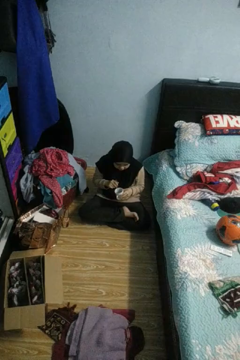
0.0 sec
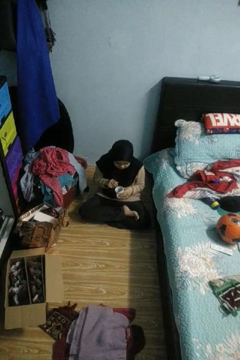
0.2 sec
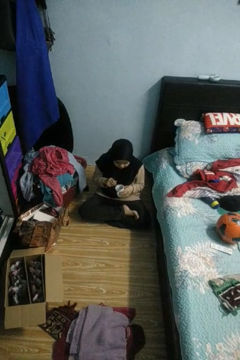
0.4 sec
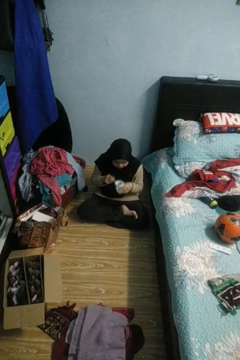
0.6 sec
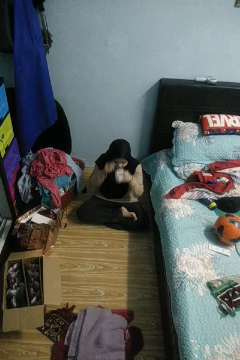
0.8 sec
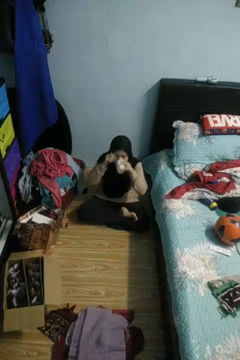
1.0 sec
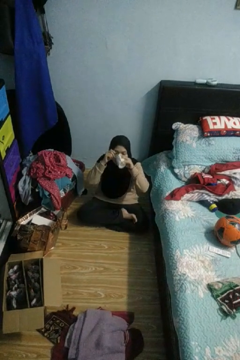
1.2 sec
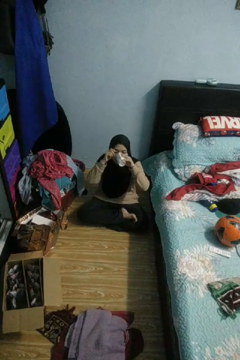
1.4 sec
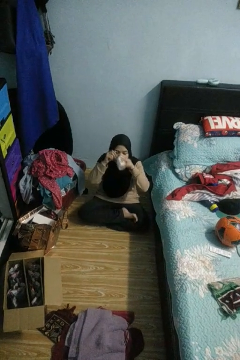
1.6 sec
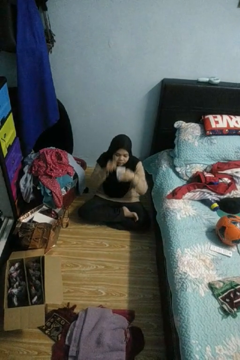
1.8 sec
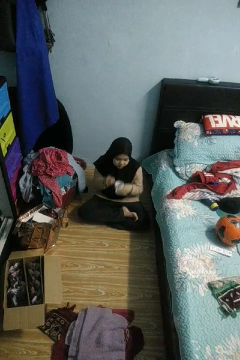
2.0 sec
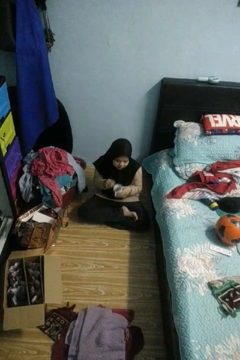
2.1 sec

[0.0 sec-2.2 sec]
person drinks from mug

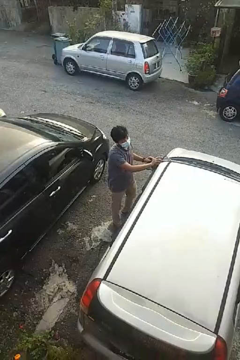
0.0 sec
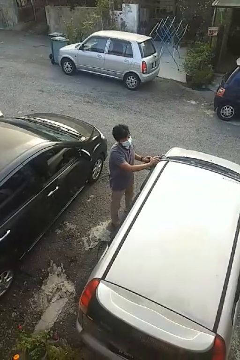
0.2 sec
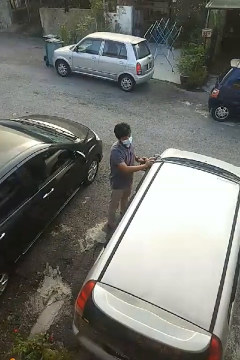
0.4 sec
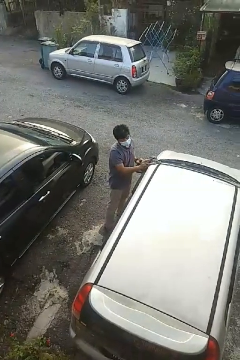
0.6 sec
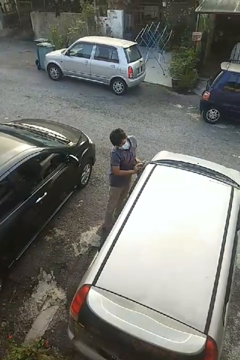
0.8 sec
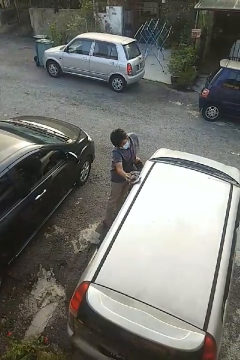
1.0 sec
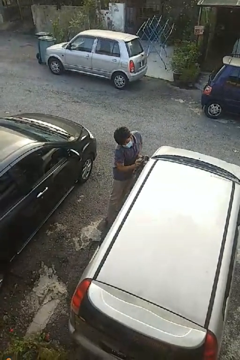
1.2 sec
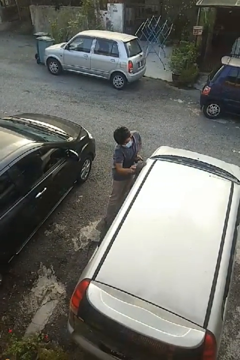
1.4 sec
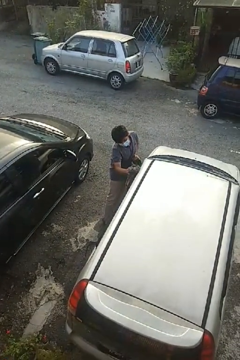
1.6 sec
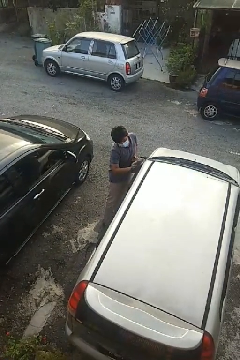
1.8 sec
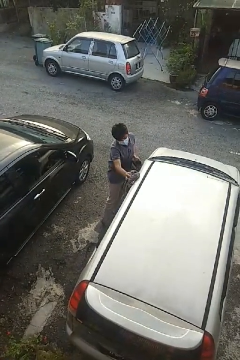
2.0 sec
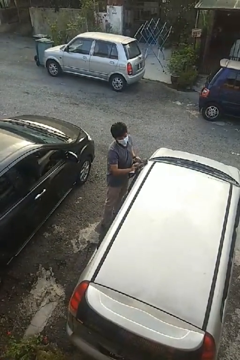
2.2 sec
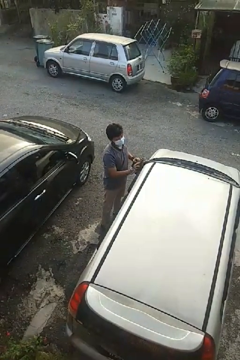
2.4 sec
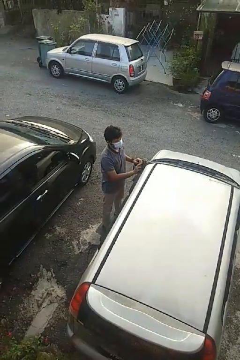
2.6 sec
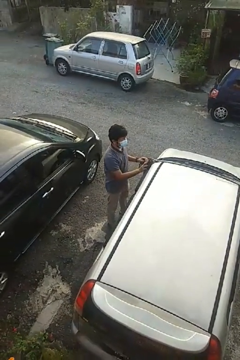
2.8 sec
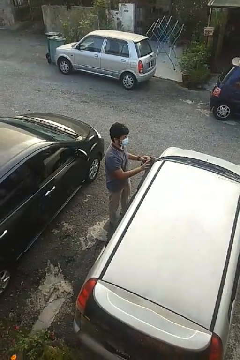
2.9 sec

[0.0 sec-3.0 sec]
person polishes car with rag

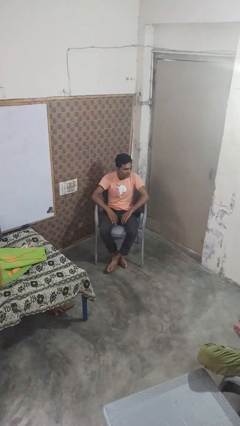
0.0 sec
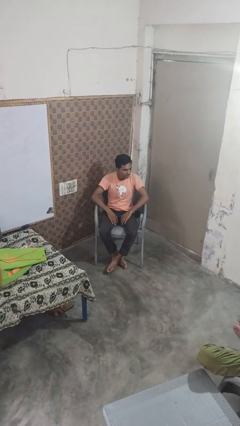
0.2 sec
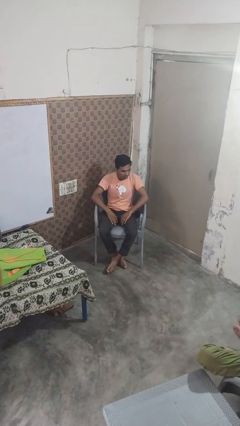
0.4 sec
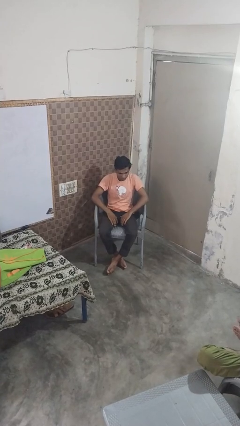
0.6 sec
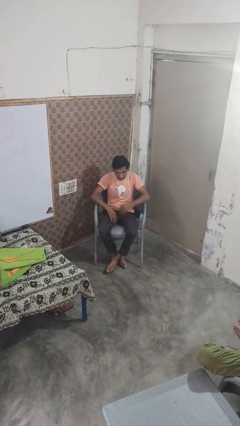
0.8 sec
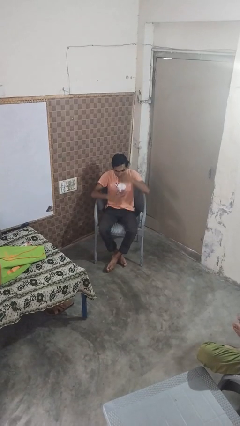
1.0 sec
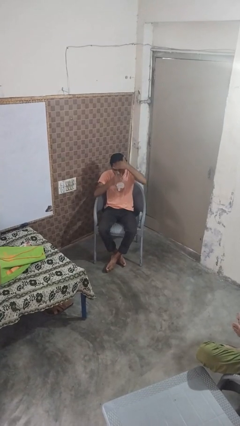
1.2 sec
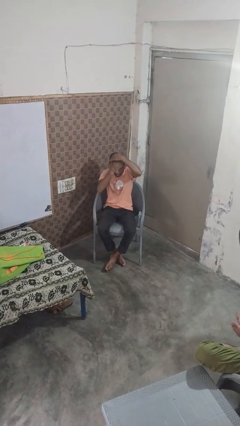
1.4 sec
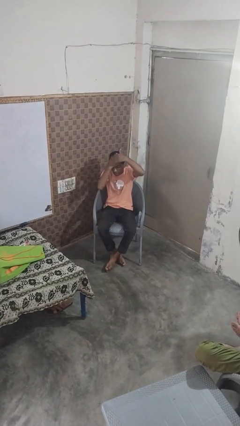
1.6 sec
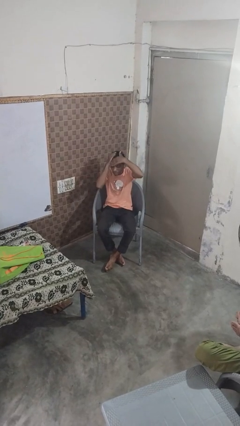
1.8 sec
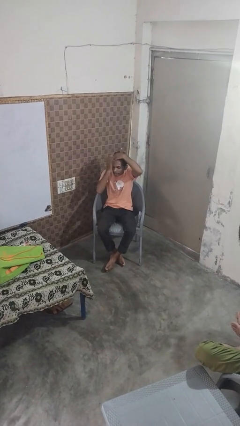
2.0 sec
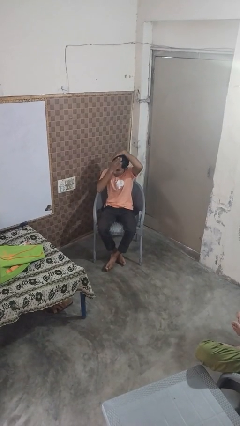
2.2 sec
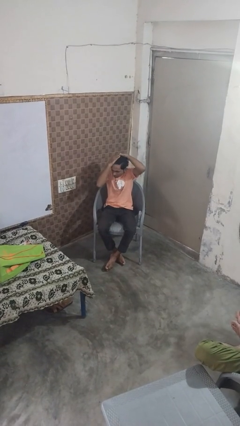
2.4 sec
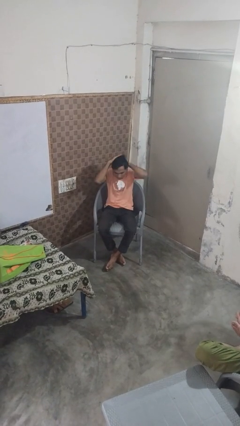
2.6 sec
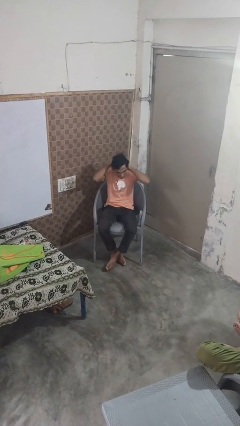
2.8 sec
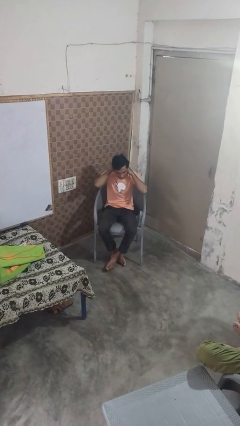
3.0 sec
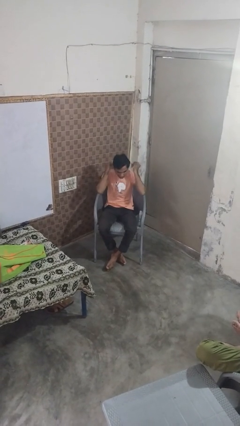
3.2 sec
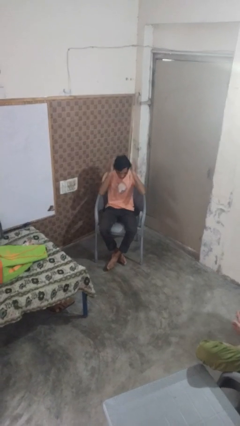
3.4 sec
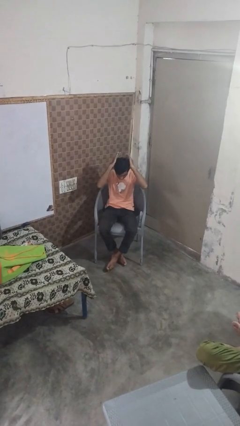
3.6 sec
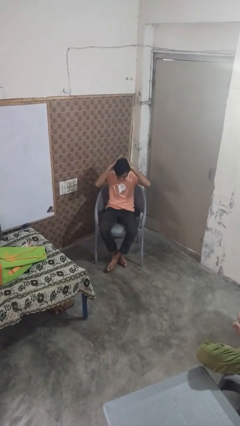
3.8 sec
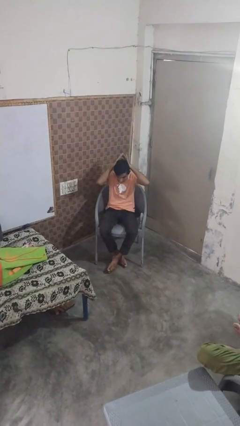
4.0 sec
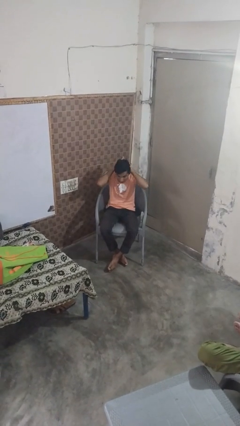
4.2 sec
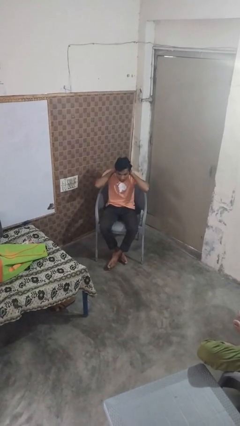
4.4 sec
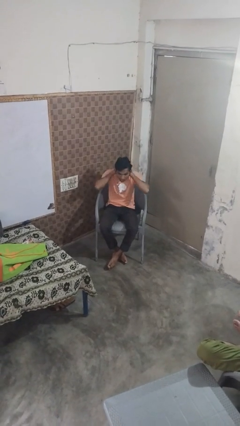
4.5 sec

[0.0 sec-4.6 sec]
person strokes hair

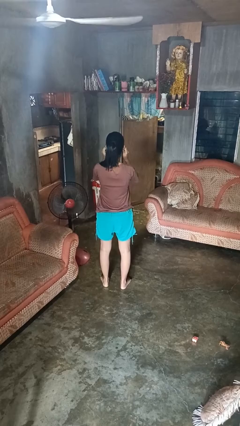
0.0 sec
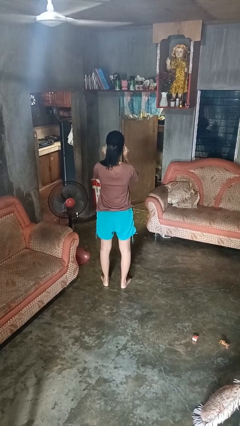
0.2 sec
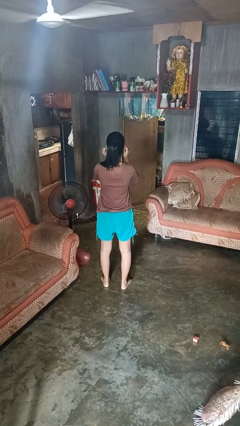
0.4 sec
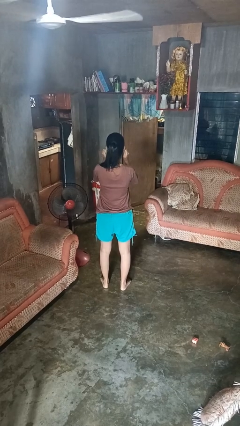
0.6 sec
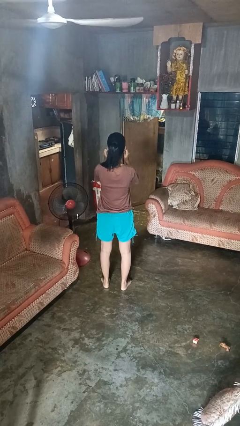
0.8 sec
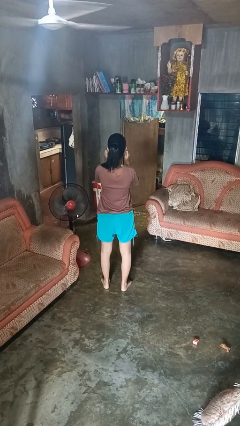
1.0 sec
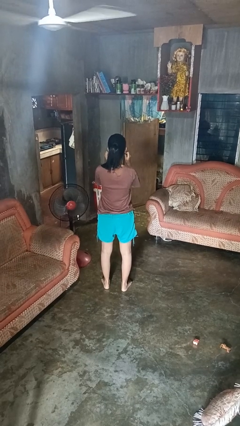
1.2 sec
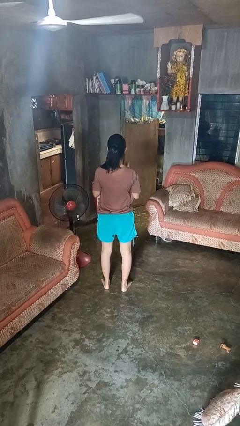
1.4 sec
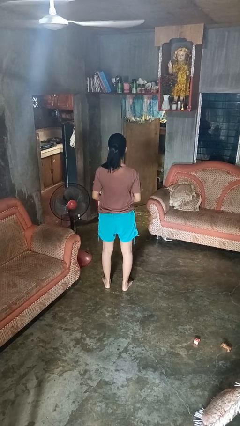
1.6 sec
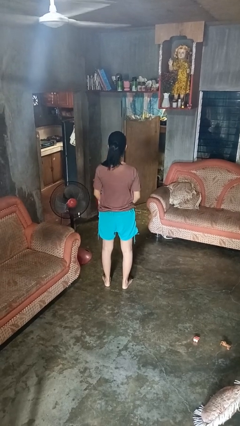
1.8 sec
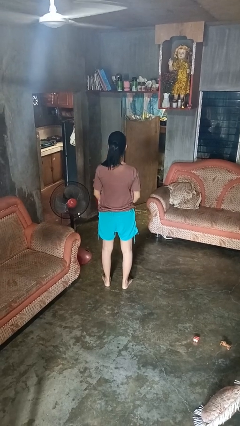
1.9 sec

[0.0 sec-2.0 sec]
person touches earlobe

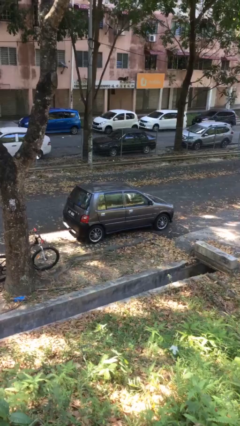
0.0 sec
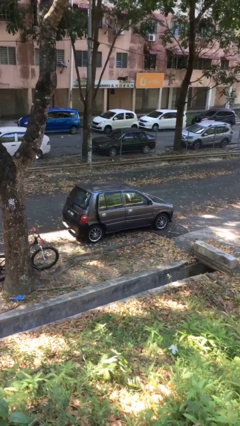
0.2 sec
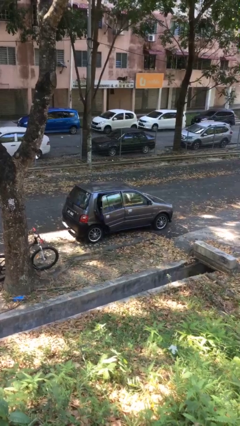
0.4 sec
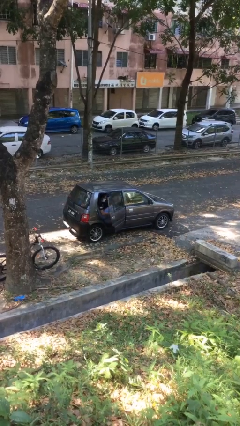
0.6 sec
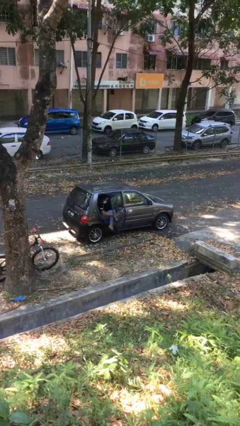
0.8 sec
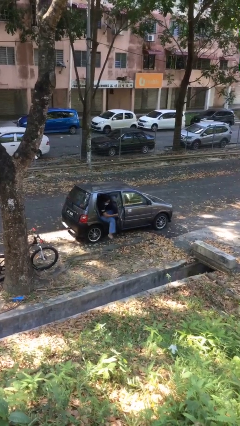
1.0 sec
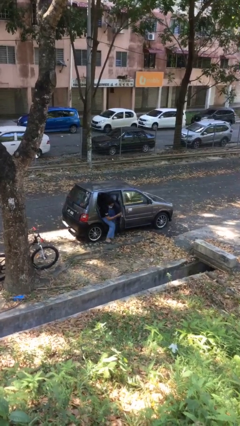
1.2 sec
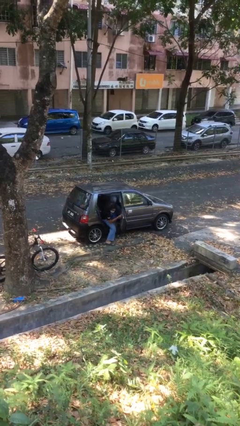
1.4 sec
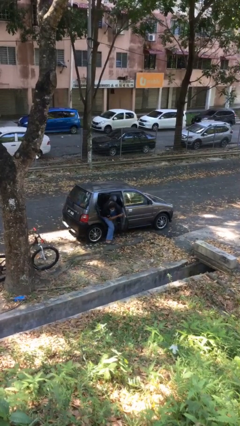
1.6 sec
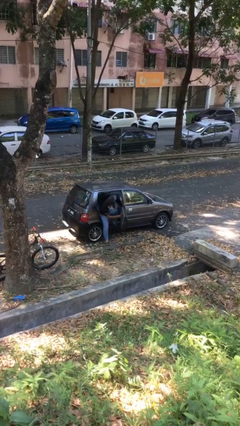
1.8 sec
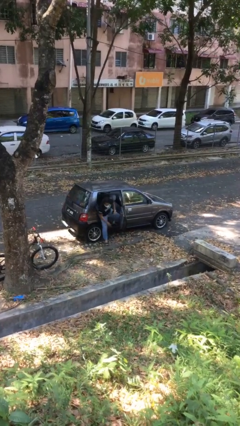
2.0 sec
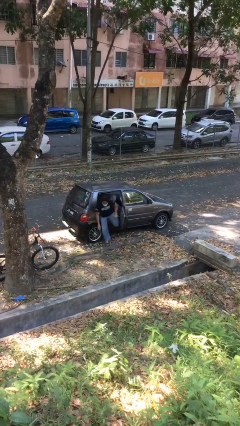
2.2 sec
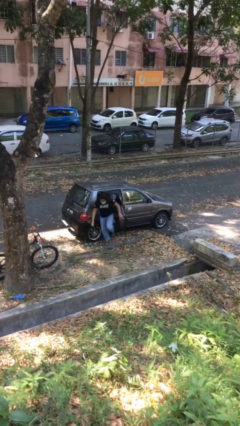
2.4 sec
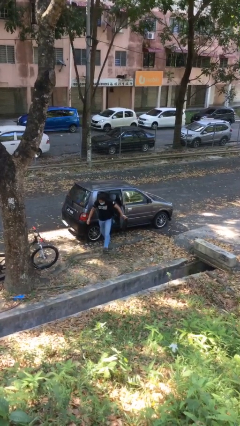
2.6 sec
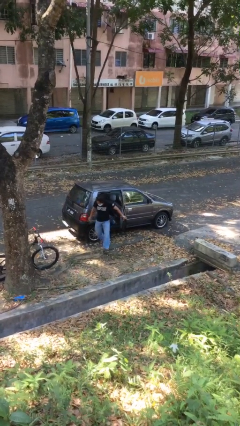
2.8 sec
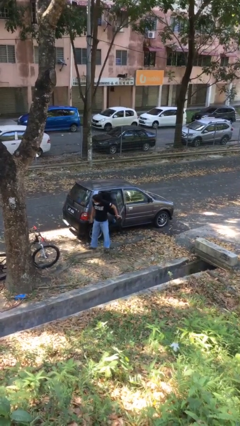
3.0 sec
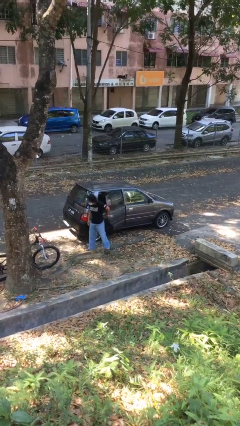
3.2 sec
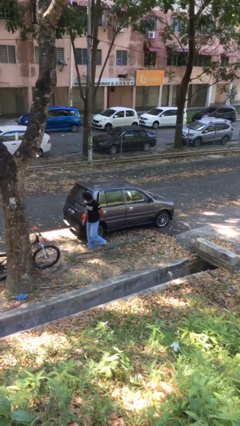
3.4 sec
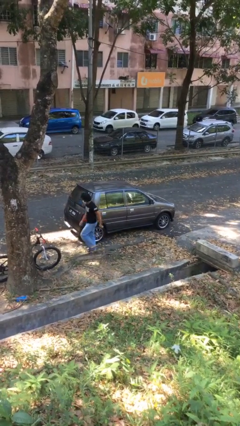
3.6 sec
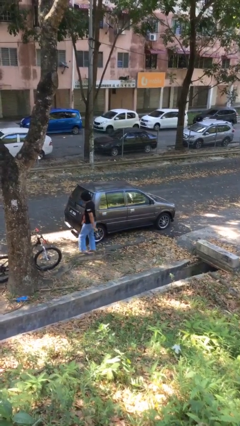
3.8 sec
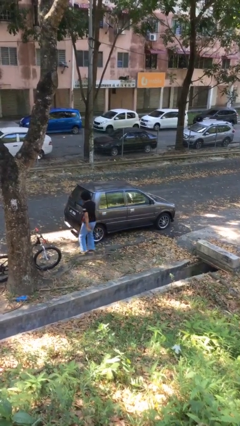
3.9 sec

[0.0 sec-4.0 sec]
car drops off person

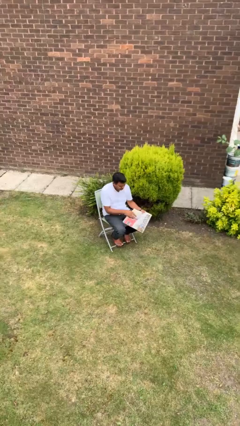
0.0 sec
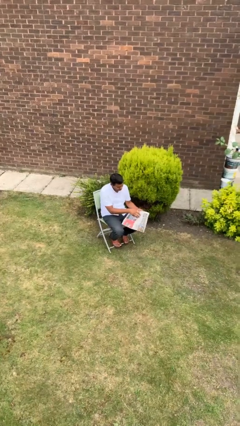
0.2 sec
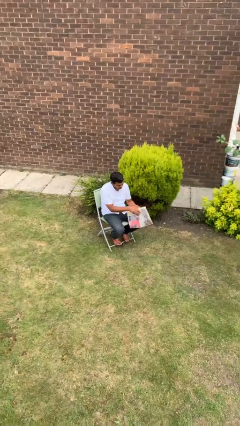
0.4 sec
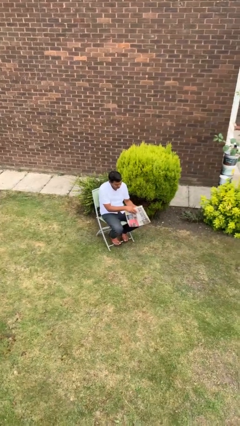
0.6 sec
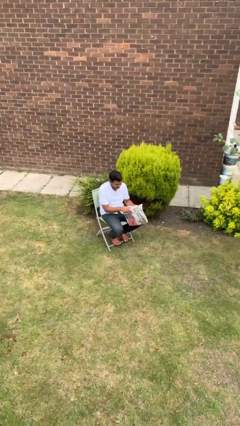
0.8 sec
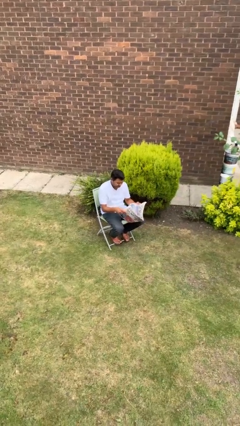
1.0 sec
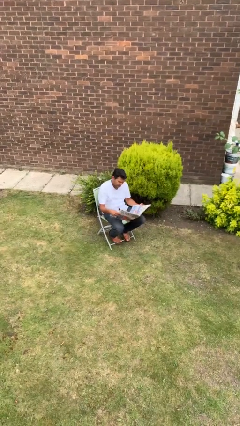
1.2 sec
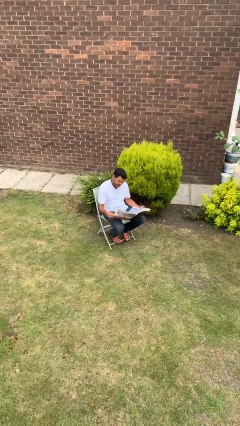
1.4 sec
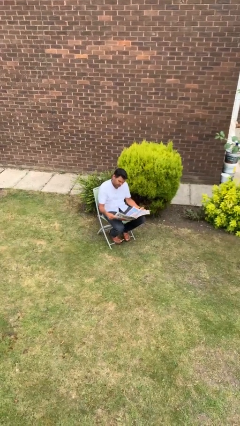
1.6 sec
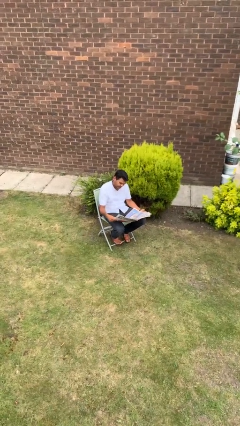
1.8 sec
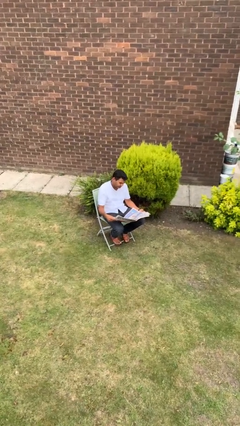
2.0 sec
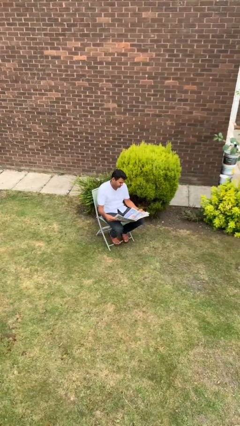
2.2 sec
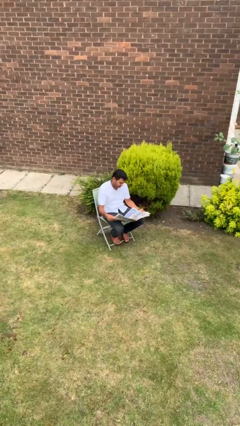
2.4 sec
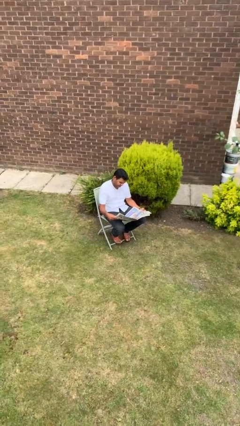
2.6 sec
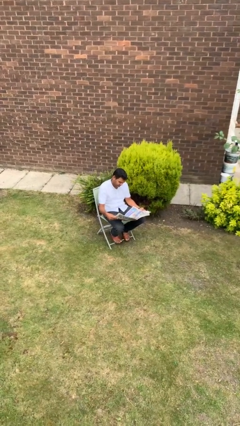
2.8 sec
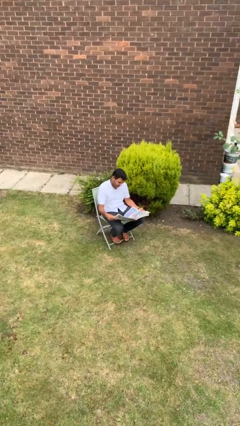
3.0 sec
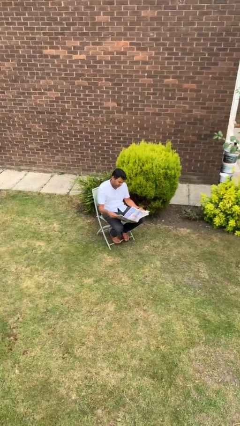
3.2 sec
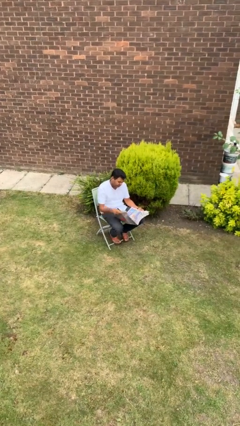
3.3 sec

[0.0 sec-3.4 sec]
person reads newspaper
